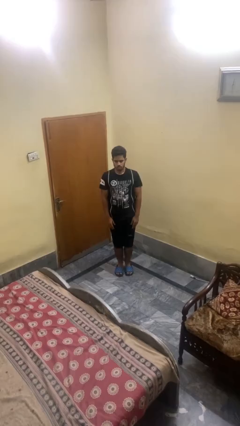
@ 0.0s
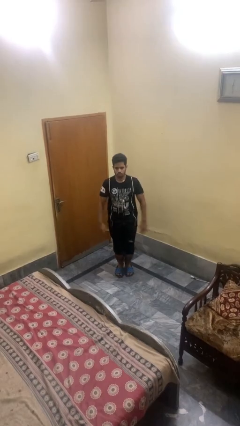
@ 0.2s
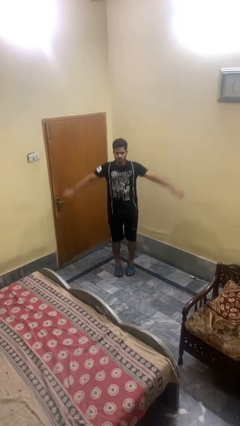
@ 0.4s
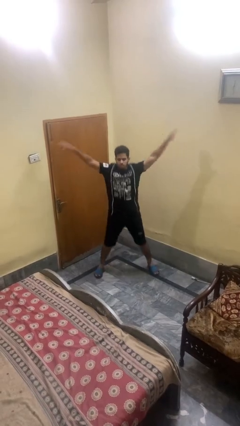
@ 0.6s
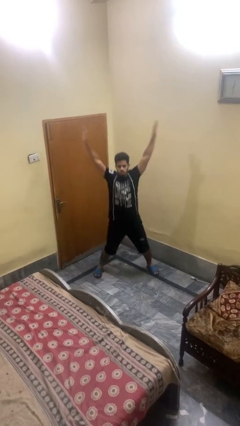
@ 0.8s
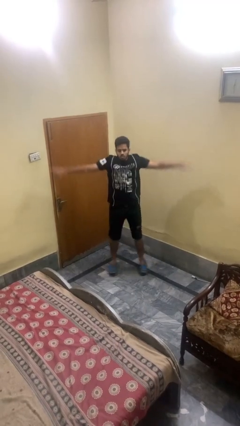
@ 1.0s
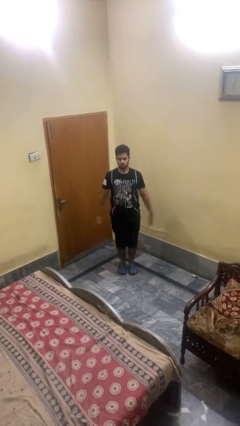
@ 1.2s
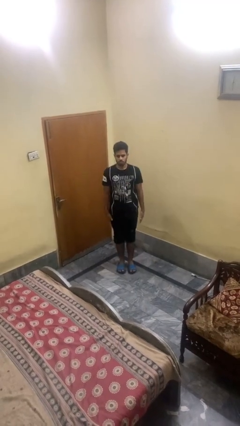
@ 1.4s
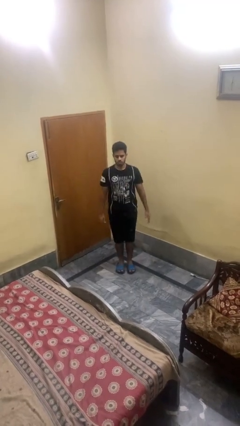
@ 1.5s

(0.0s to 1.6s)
person exercises with jumping jacks

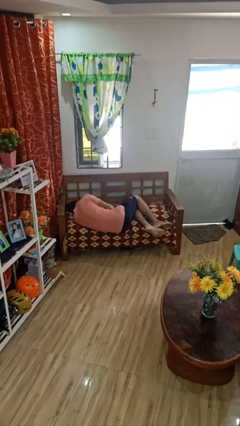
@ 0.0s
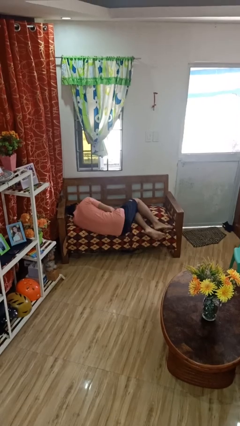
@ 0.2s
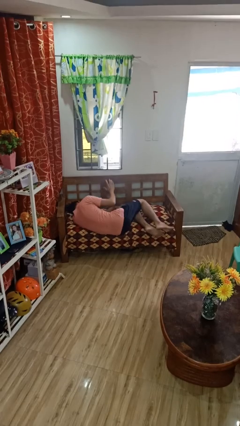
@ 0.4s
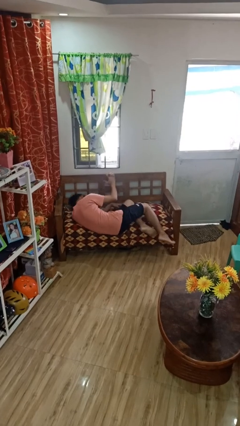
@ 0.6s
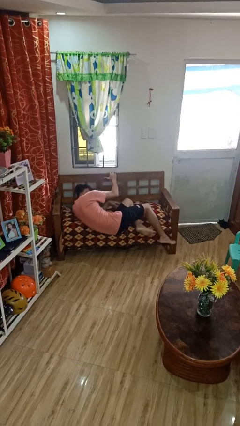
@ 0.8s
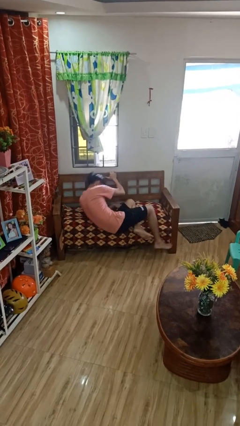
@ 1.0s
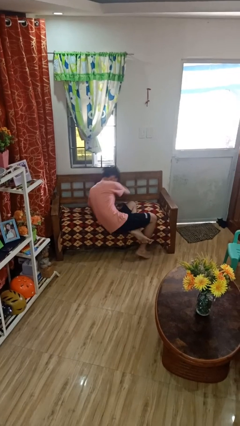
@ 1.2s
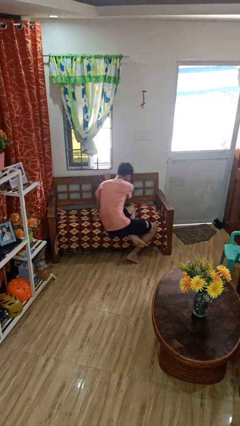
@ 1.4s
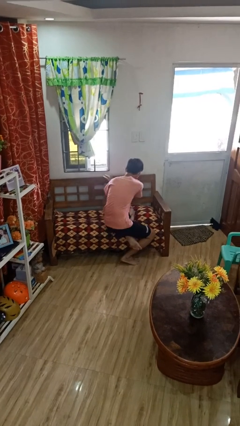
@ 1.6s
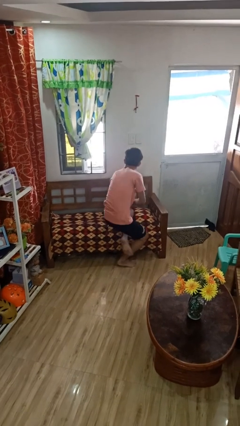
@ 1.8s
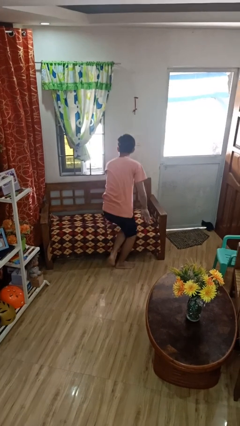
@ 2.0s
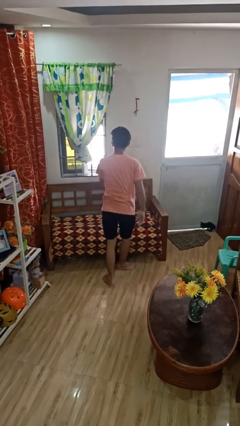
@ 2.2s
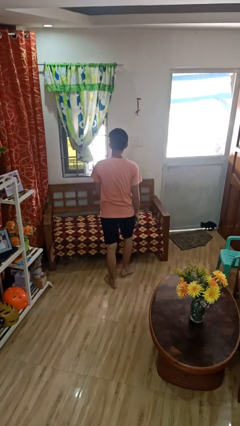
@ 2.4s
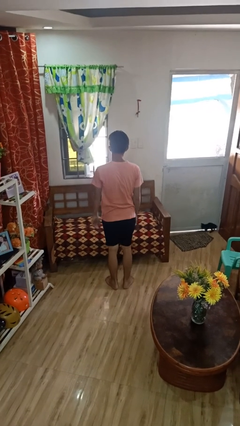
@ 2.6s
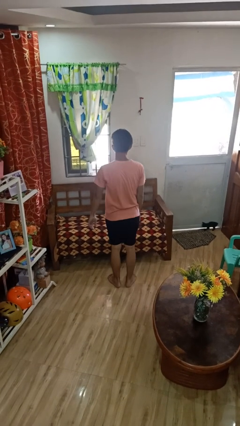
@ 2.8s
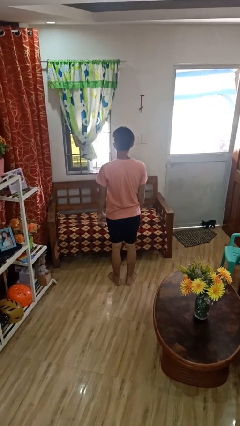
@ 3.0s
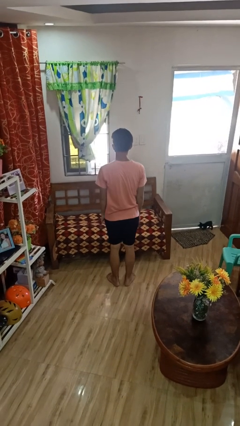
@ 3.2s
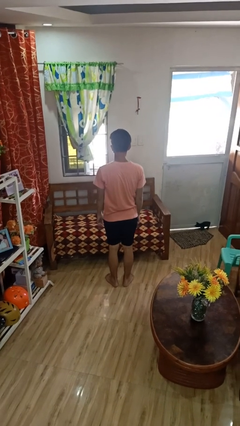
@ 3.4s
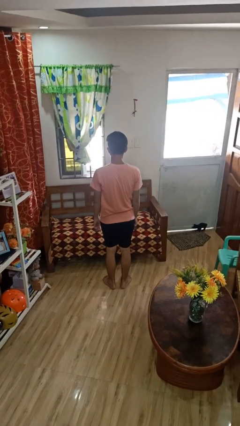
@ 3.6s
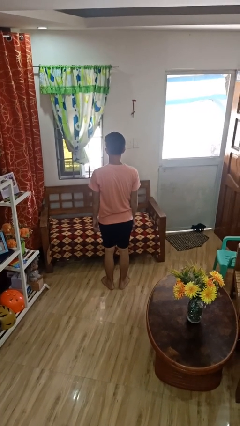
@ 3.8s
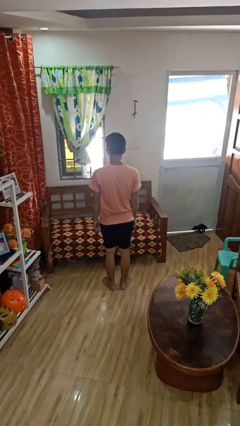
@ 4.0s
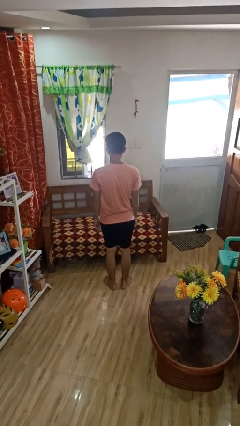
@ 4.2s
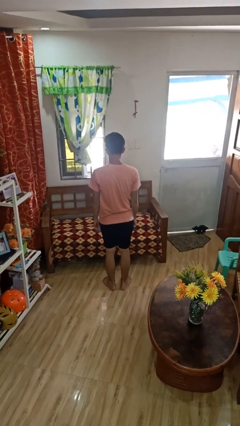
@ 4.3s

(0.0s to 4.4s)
person stands up

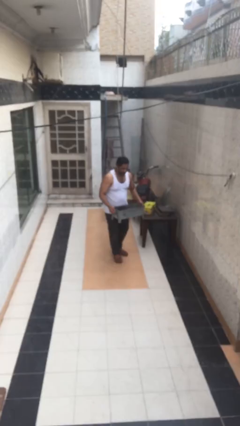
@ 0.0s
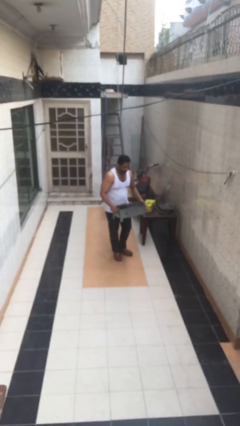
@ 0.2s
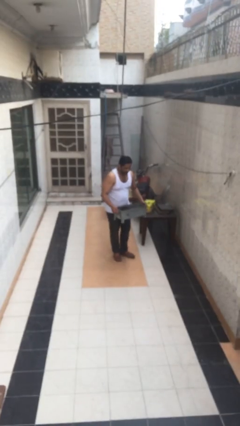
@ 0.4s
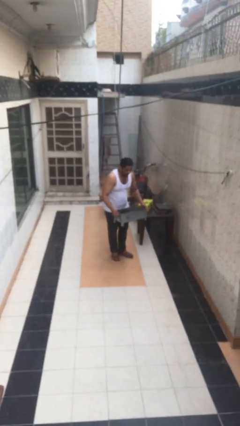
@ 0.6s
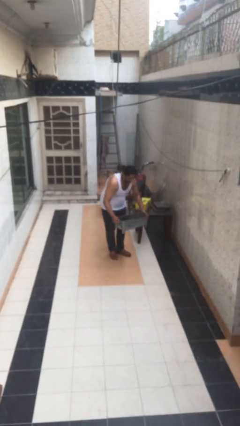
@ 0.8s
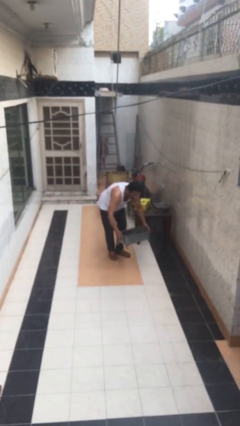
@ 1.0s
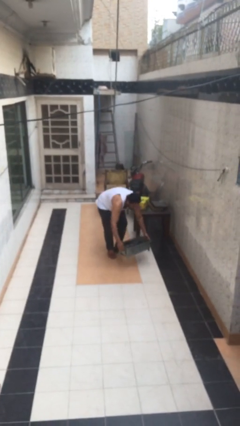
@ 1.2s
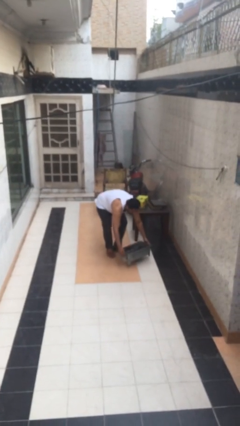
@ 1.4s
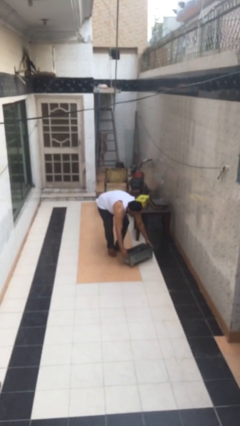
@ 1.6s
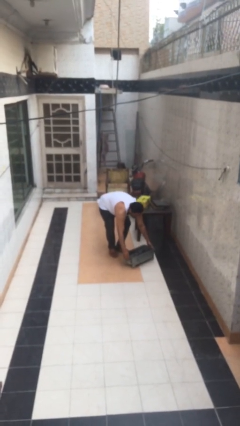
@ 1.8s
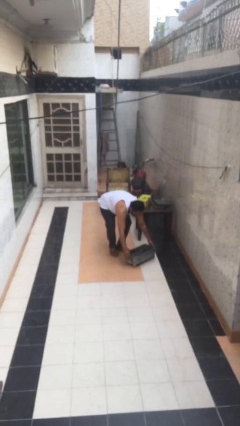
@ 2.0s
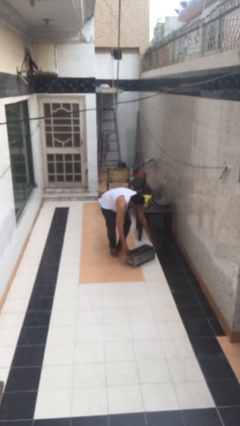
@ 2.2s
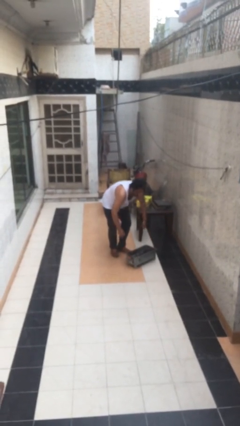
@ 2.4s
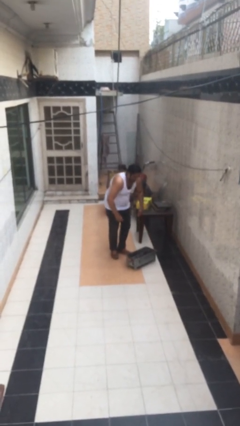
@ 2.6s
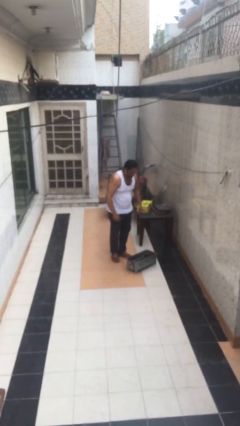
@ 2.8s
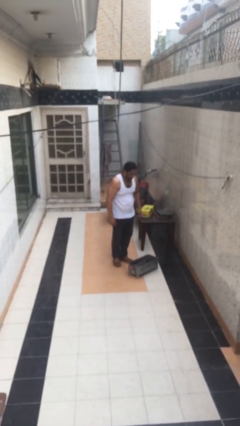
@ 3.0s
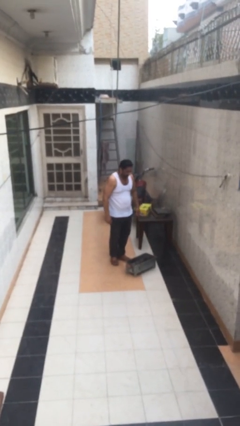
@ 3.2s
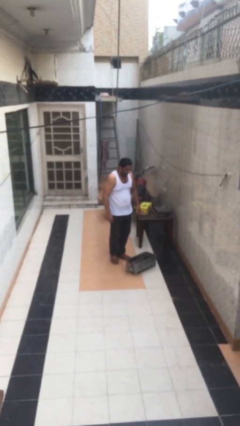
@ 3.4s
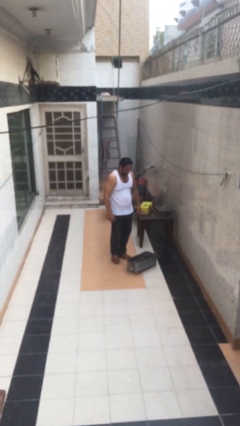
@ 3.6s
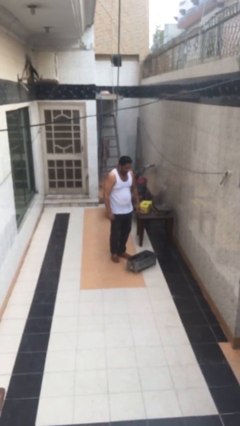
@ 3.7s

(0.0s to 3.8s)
person puts down object on floor

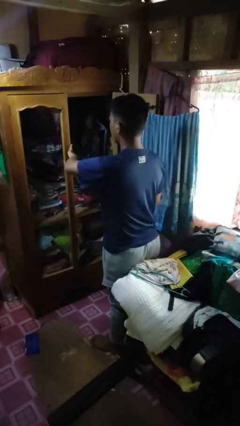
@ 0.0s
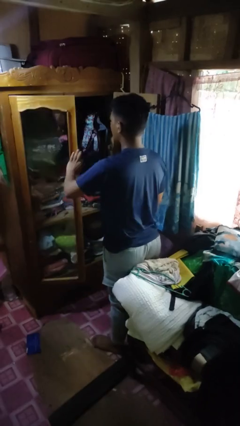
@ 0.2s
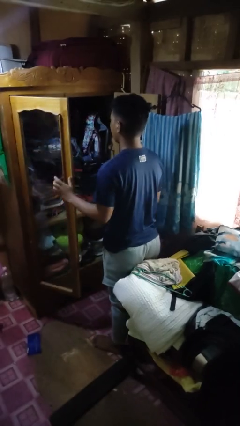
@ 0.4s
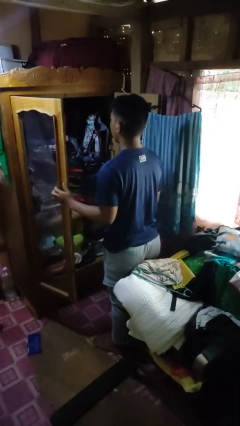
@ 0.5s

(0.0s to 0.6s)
person opens closet door

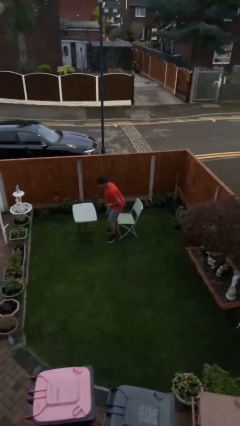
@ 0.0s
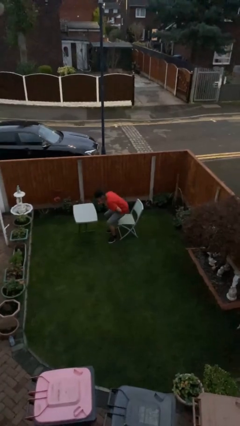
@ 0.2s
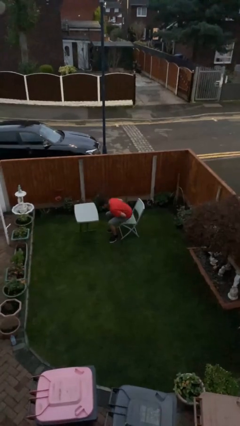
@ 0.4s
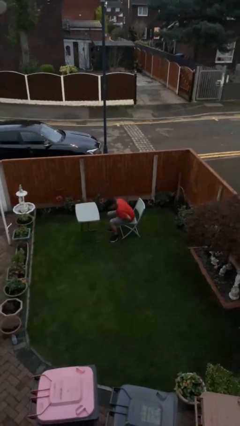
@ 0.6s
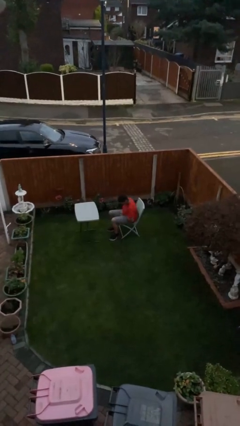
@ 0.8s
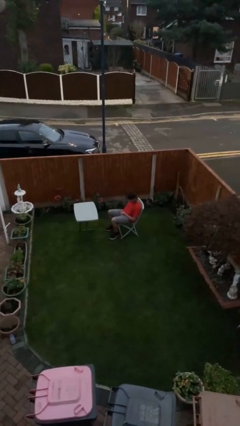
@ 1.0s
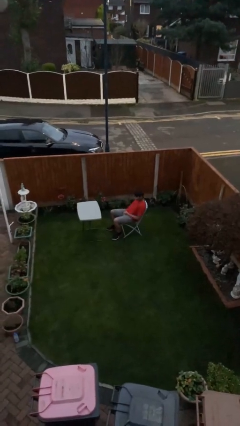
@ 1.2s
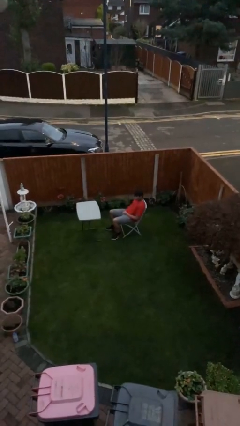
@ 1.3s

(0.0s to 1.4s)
person sits down

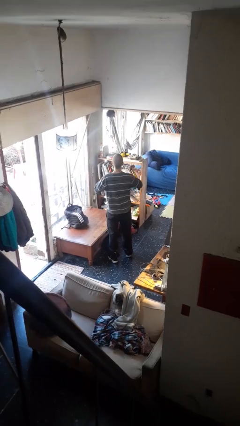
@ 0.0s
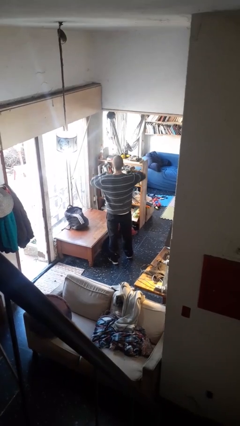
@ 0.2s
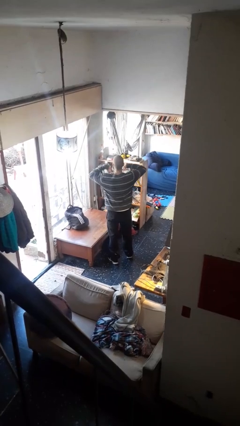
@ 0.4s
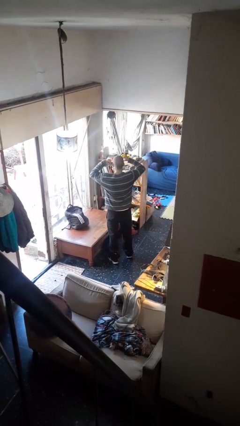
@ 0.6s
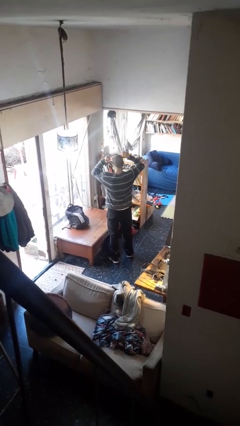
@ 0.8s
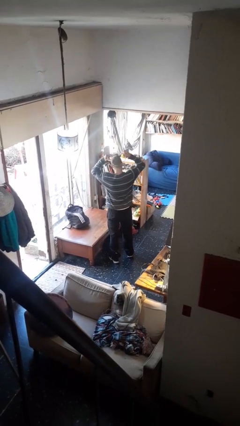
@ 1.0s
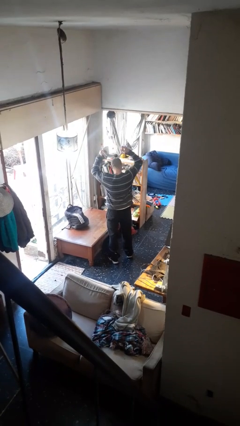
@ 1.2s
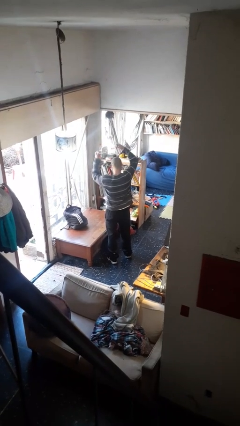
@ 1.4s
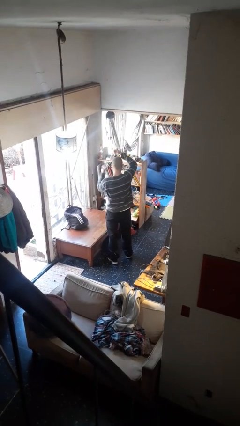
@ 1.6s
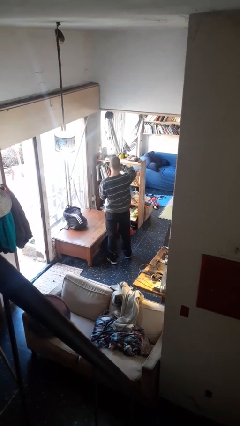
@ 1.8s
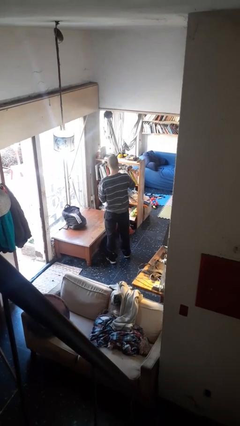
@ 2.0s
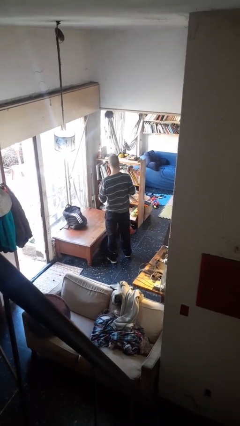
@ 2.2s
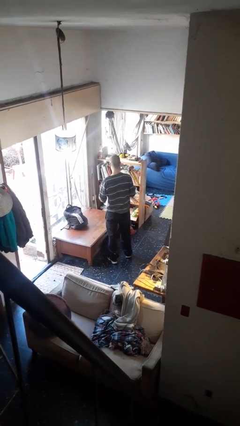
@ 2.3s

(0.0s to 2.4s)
person takes off necklace

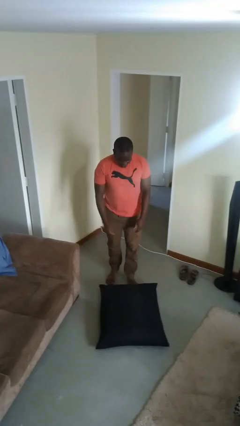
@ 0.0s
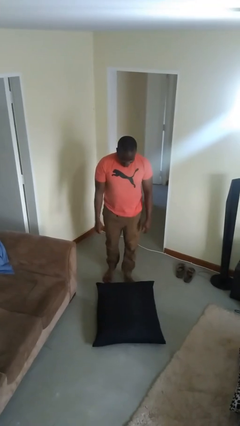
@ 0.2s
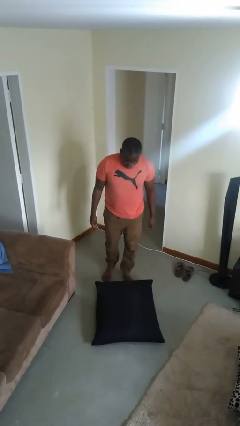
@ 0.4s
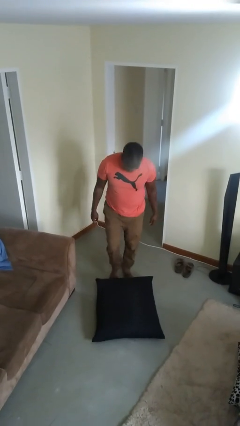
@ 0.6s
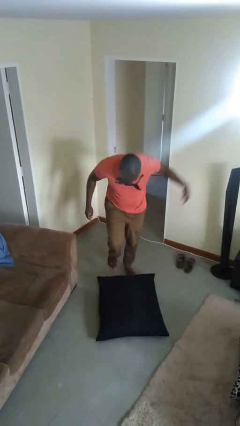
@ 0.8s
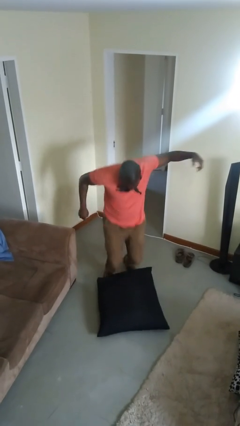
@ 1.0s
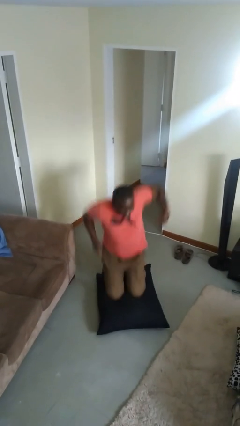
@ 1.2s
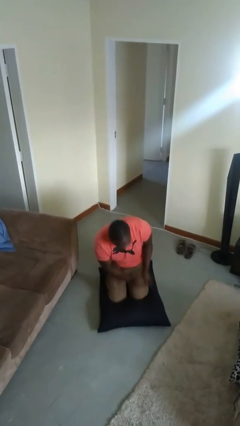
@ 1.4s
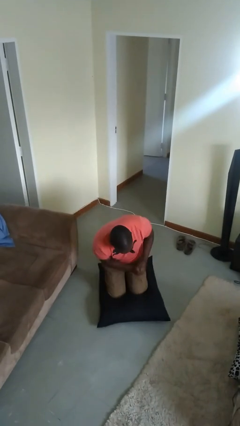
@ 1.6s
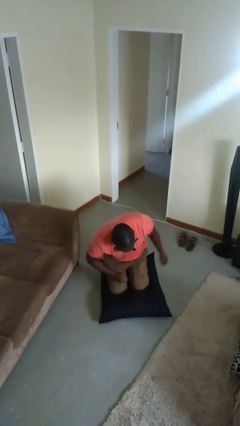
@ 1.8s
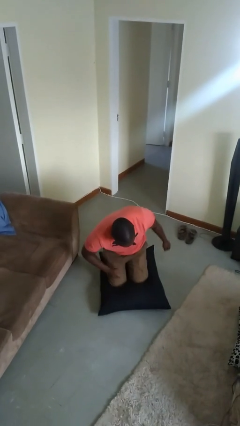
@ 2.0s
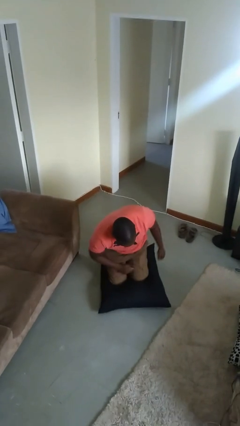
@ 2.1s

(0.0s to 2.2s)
person trips on object on floor

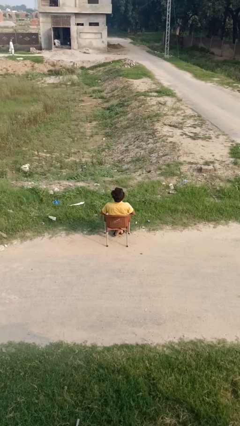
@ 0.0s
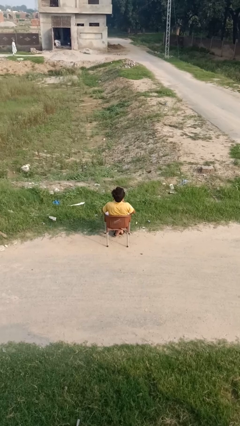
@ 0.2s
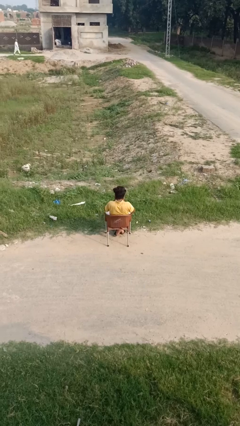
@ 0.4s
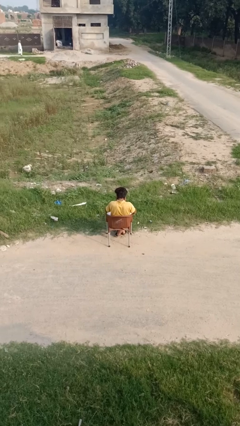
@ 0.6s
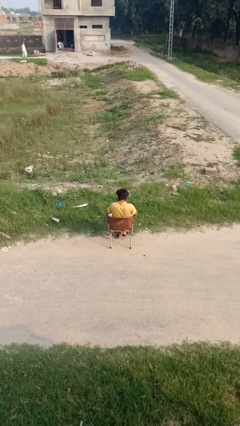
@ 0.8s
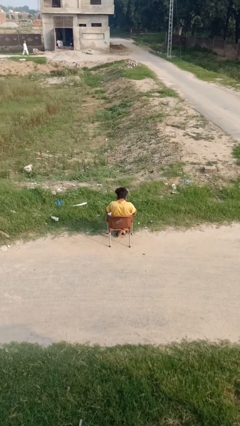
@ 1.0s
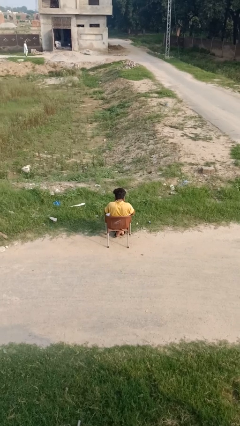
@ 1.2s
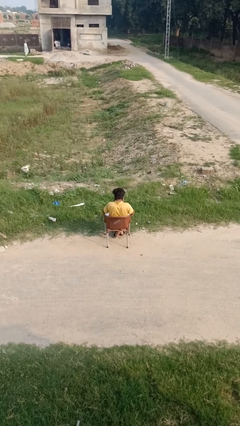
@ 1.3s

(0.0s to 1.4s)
person sneezes into hand
